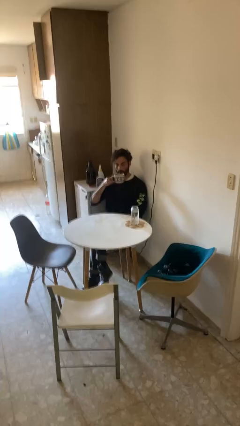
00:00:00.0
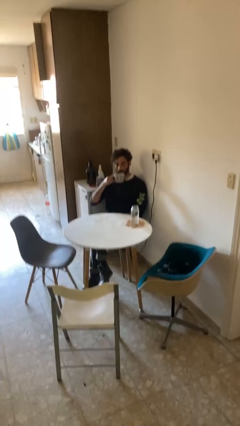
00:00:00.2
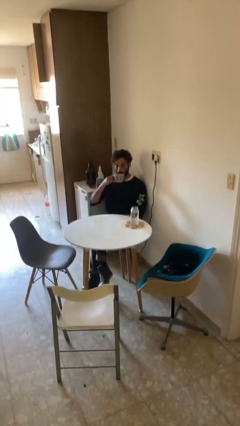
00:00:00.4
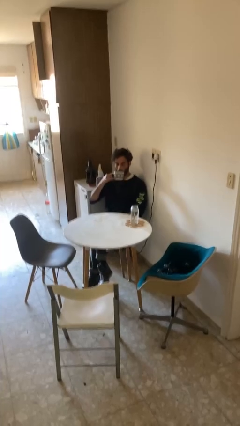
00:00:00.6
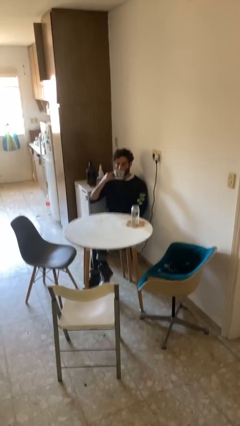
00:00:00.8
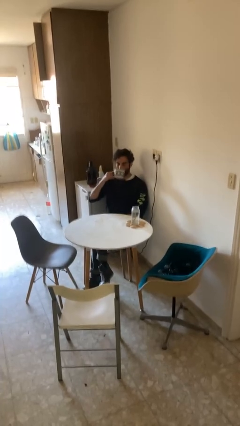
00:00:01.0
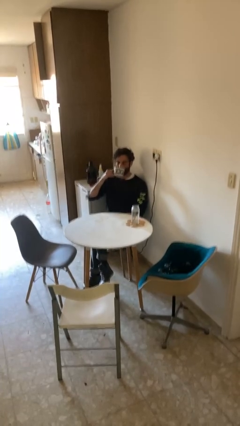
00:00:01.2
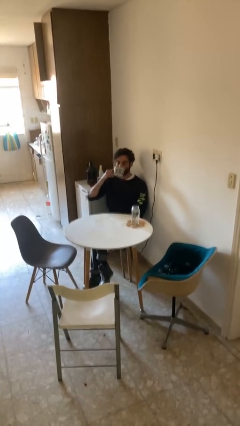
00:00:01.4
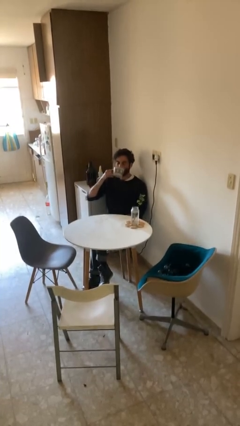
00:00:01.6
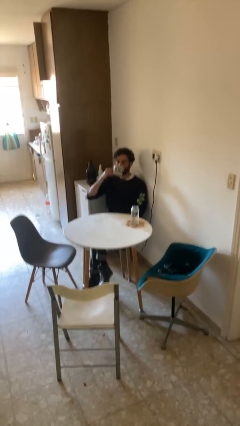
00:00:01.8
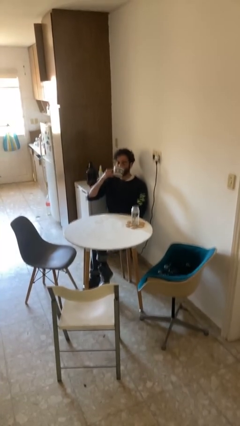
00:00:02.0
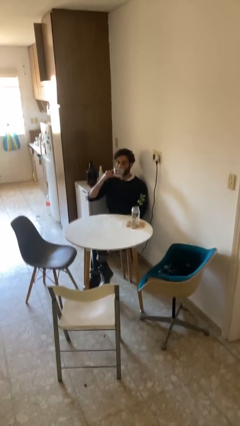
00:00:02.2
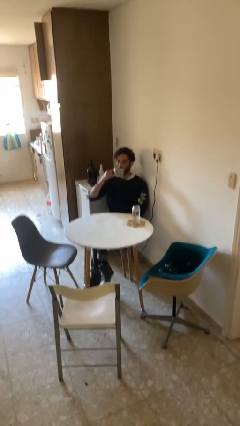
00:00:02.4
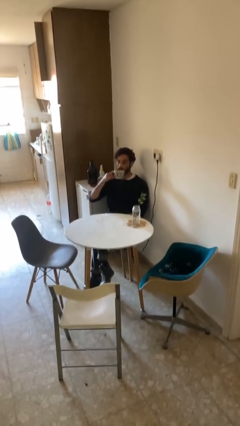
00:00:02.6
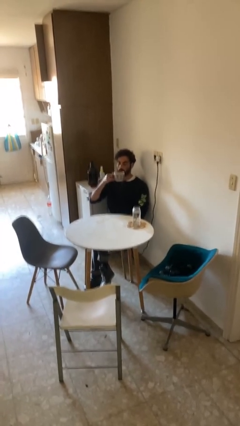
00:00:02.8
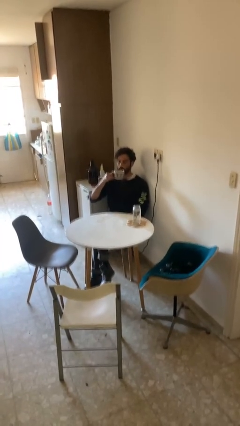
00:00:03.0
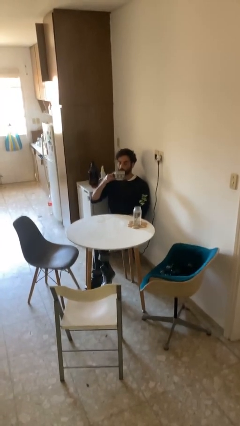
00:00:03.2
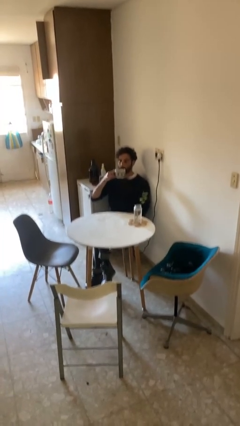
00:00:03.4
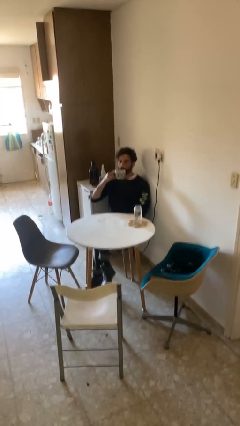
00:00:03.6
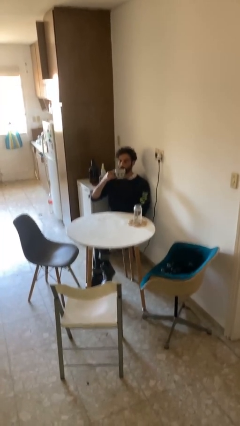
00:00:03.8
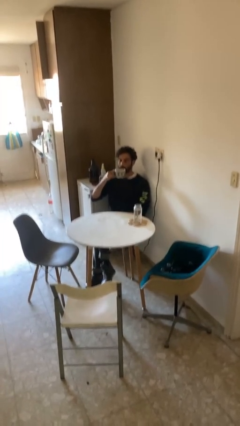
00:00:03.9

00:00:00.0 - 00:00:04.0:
person drinks from mug

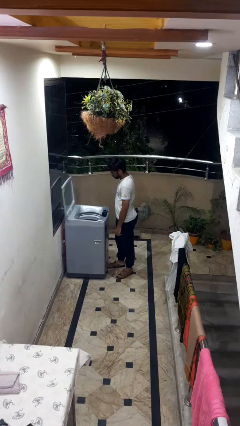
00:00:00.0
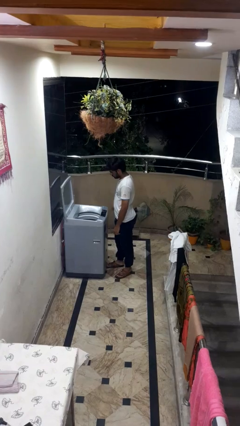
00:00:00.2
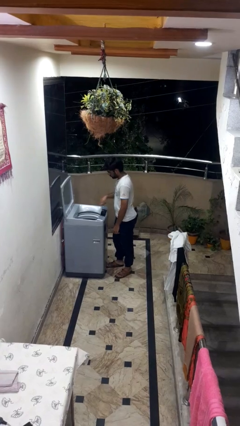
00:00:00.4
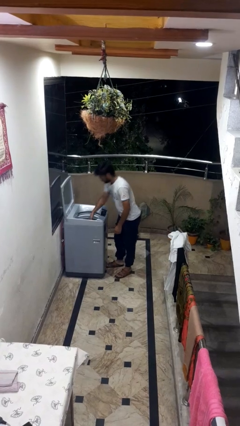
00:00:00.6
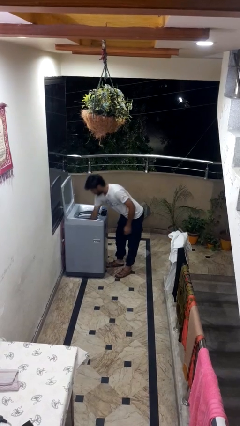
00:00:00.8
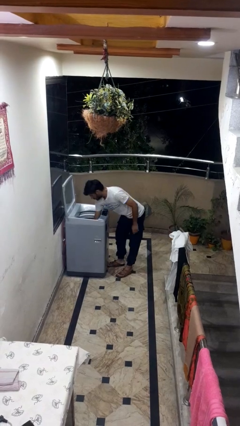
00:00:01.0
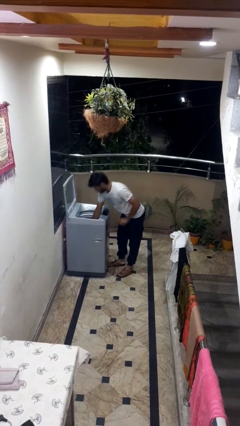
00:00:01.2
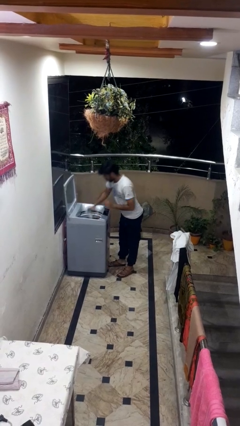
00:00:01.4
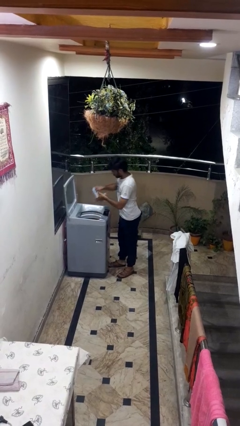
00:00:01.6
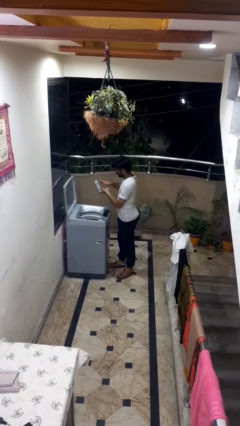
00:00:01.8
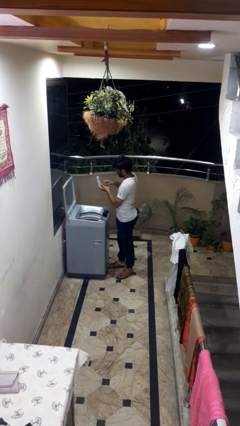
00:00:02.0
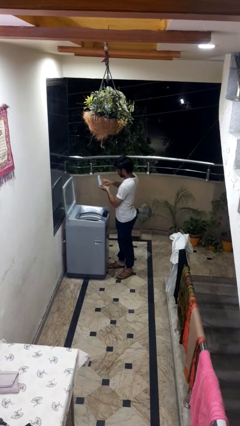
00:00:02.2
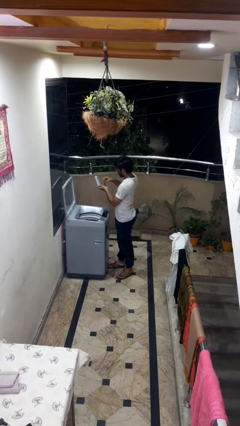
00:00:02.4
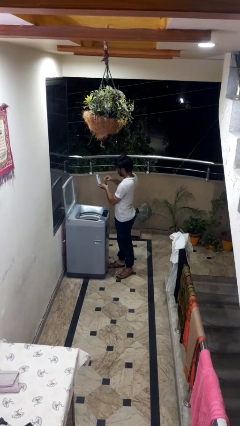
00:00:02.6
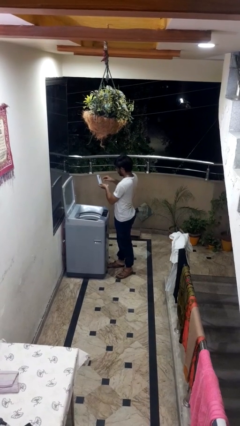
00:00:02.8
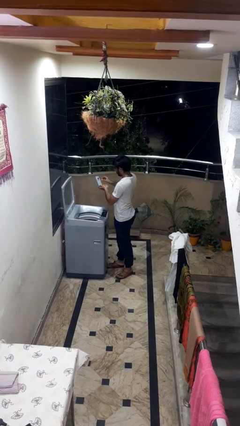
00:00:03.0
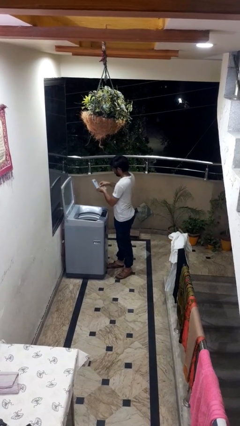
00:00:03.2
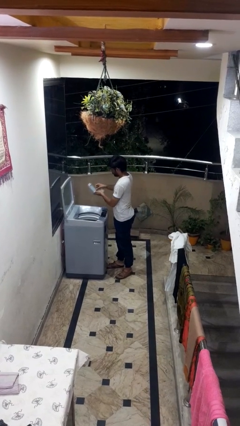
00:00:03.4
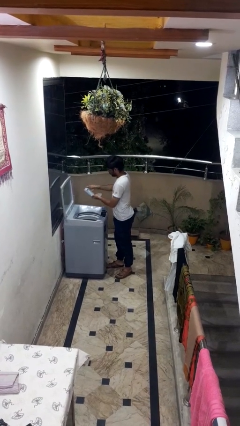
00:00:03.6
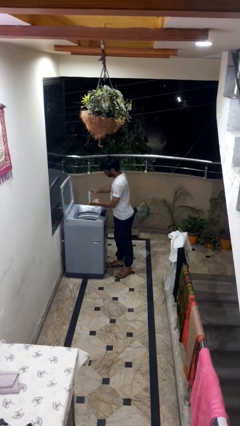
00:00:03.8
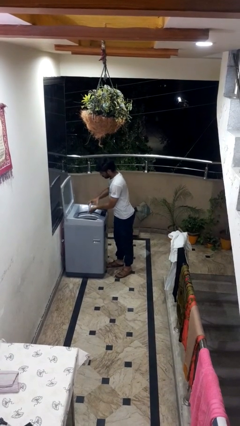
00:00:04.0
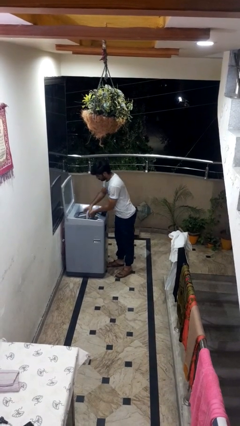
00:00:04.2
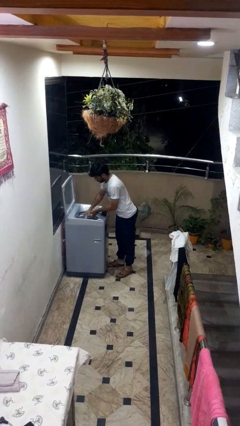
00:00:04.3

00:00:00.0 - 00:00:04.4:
person cleans dryer lint trap

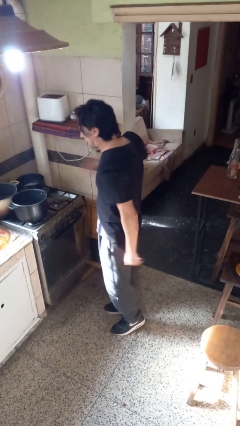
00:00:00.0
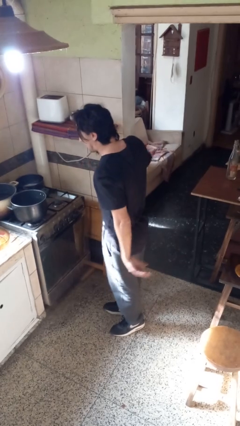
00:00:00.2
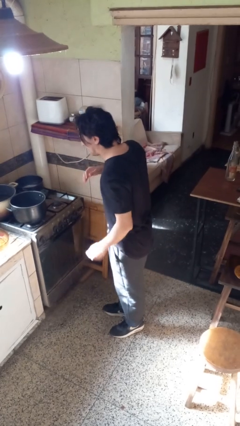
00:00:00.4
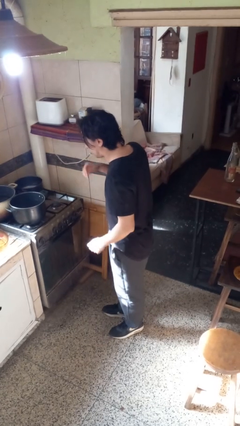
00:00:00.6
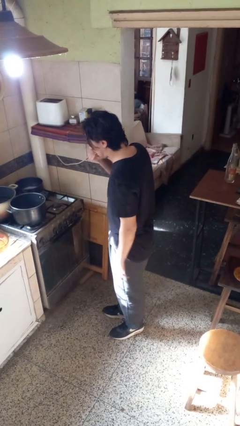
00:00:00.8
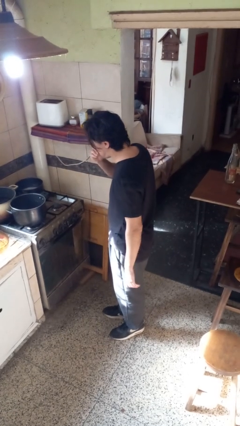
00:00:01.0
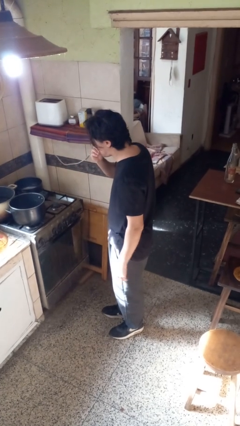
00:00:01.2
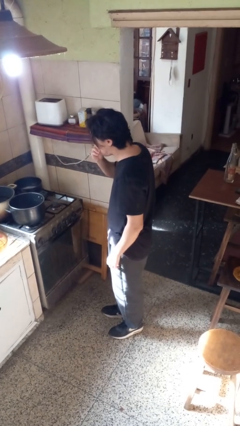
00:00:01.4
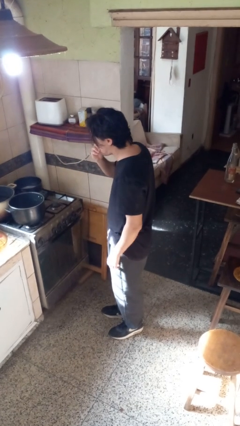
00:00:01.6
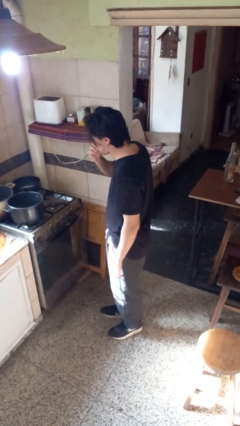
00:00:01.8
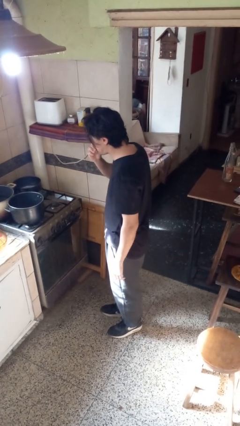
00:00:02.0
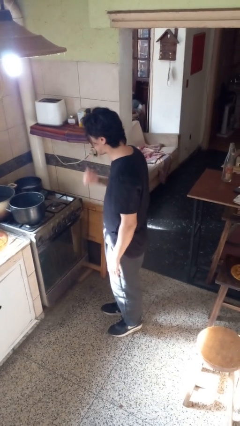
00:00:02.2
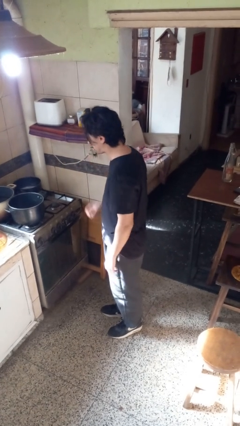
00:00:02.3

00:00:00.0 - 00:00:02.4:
person burns hand

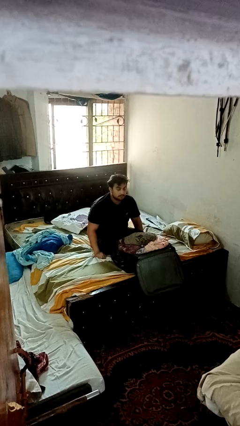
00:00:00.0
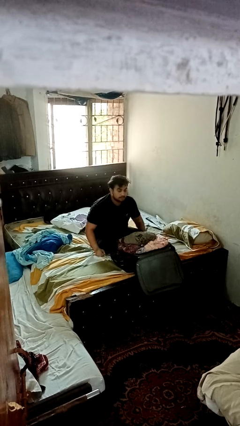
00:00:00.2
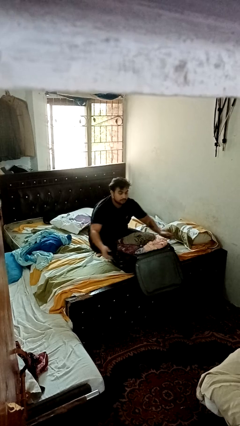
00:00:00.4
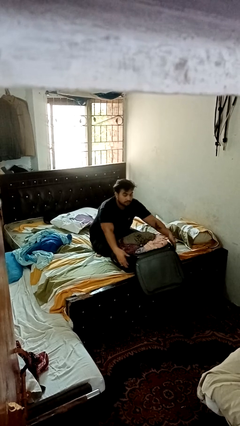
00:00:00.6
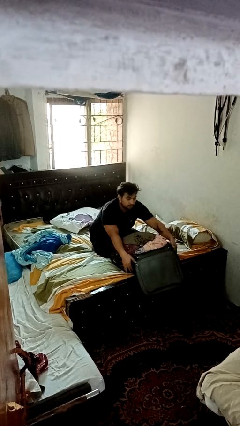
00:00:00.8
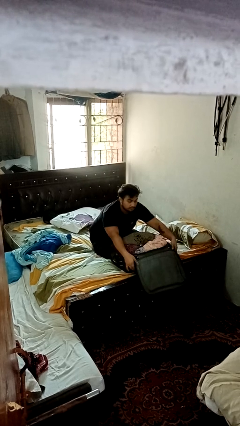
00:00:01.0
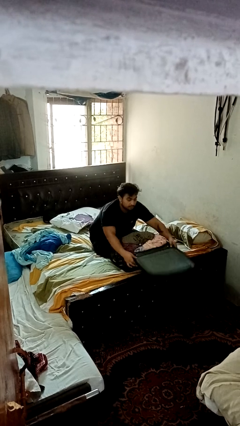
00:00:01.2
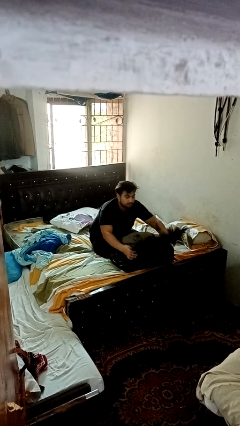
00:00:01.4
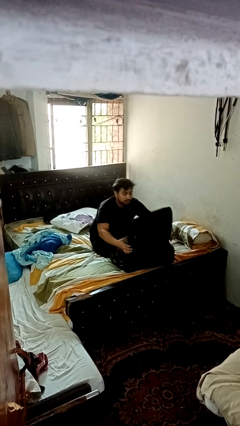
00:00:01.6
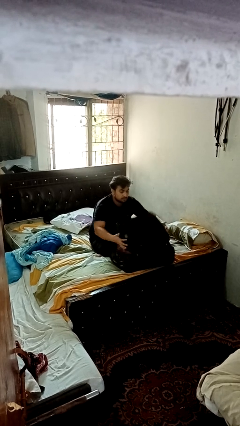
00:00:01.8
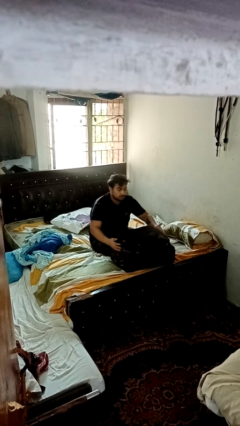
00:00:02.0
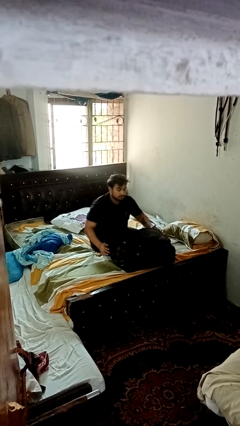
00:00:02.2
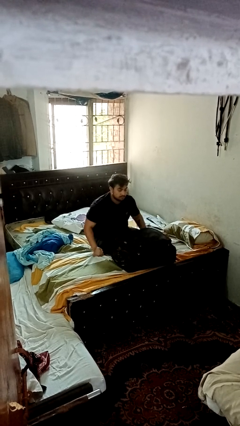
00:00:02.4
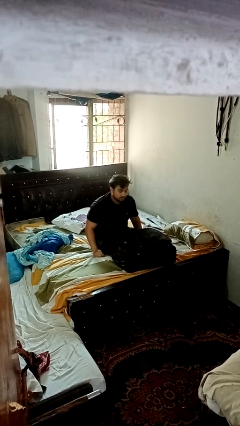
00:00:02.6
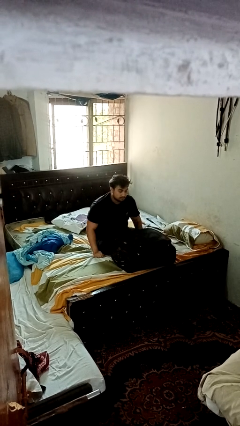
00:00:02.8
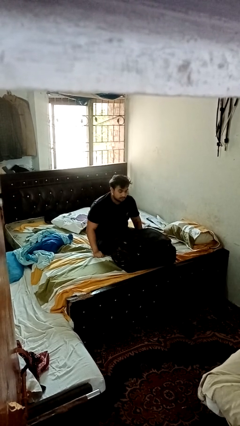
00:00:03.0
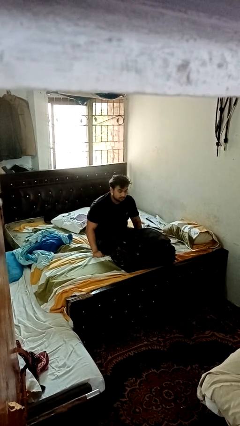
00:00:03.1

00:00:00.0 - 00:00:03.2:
person closes suitcase

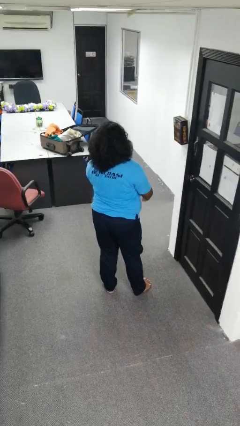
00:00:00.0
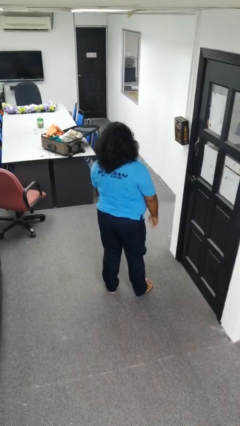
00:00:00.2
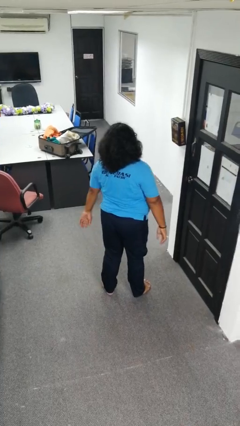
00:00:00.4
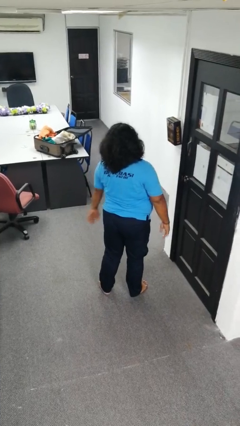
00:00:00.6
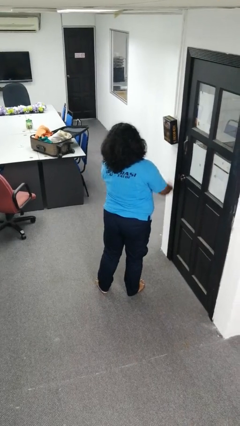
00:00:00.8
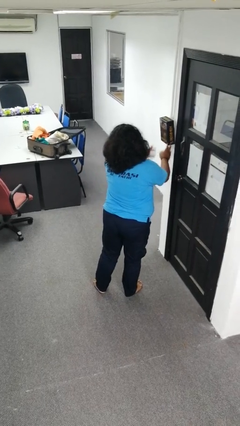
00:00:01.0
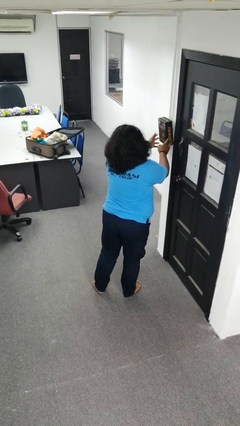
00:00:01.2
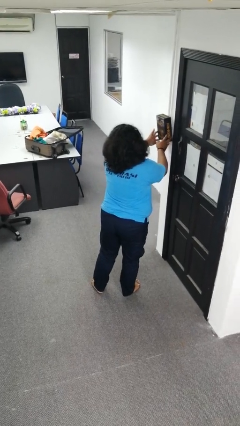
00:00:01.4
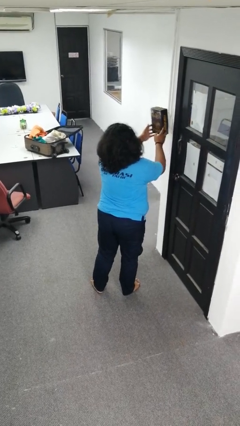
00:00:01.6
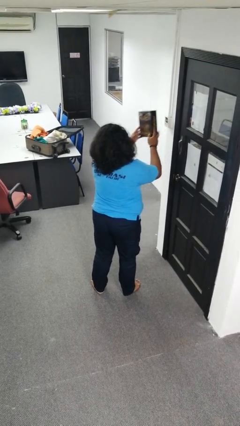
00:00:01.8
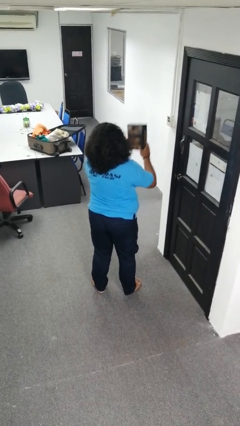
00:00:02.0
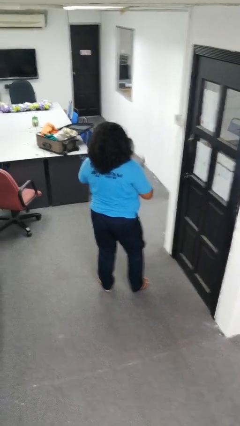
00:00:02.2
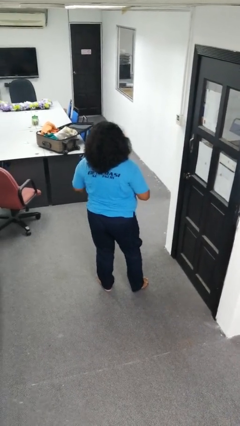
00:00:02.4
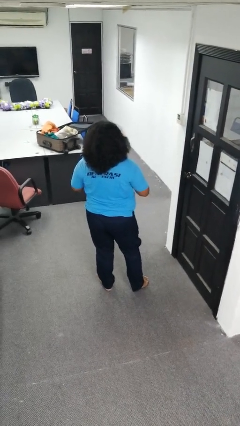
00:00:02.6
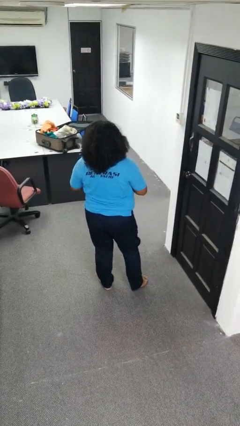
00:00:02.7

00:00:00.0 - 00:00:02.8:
person takes down picture frame

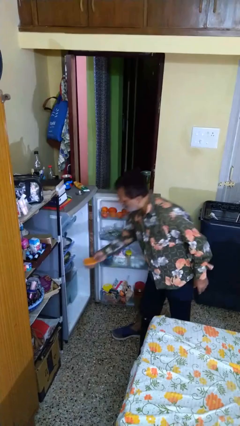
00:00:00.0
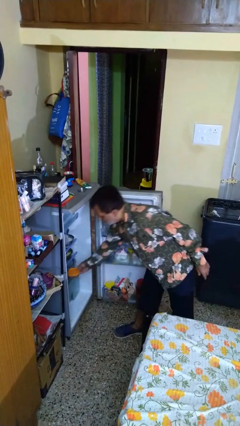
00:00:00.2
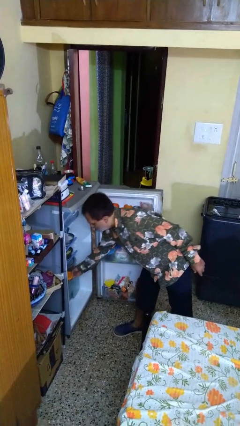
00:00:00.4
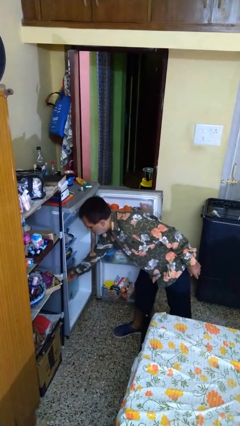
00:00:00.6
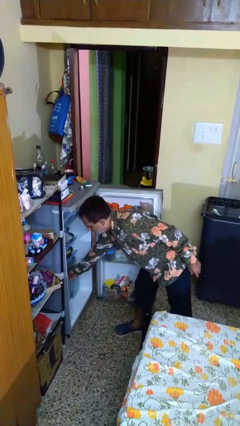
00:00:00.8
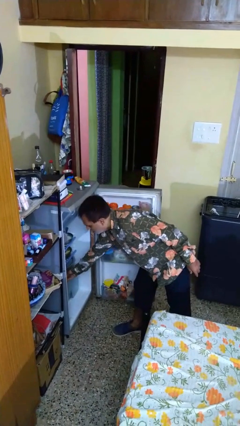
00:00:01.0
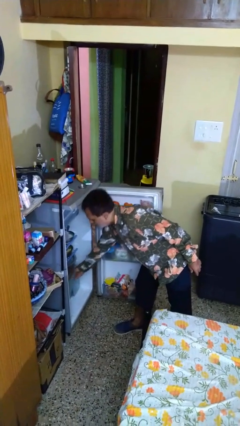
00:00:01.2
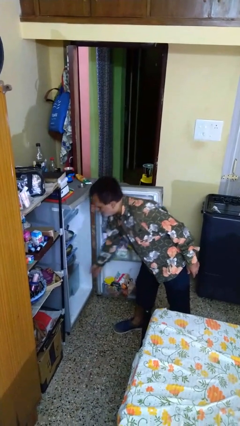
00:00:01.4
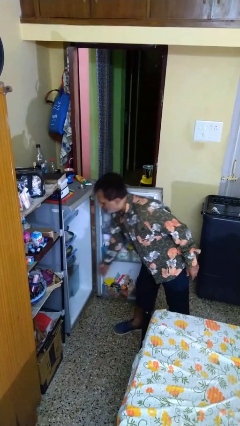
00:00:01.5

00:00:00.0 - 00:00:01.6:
person puts object into refrigerator
